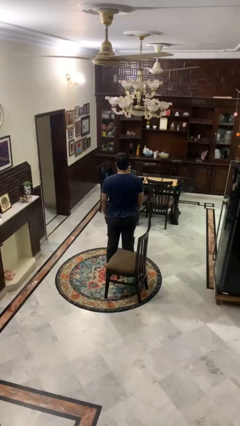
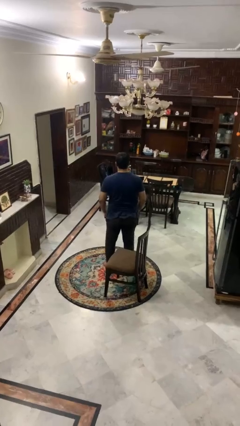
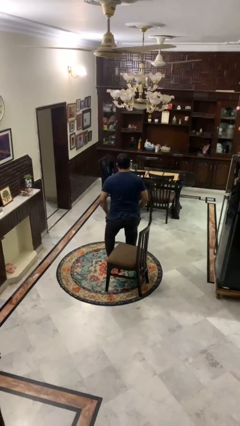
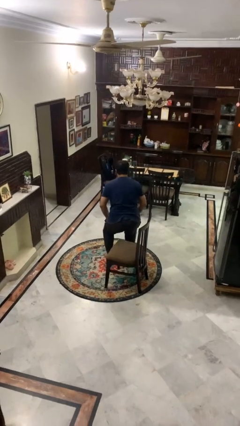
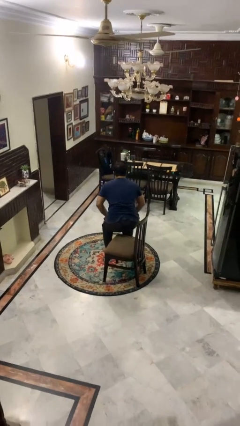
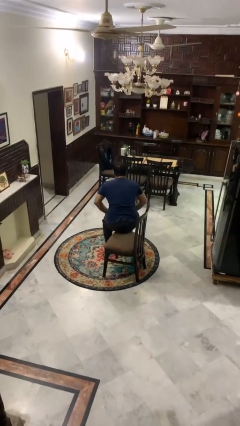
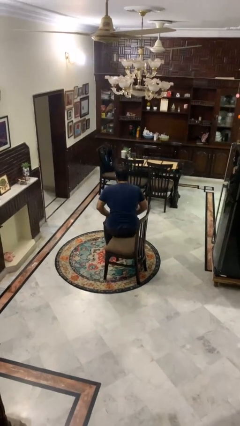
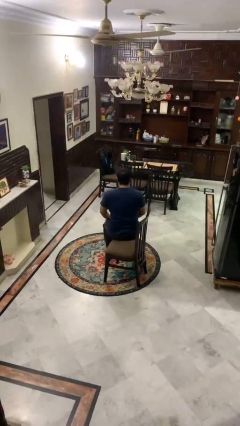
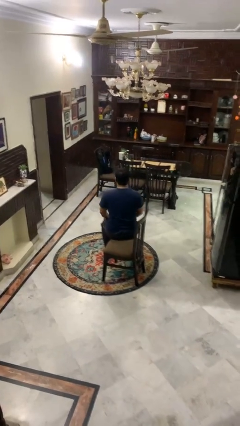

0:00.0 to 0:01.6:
person sits down

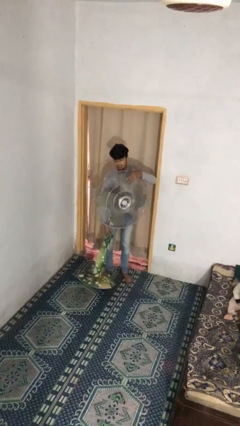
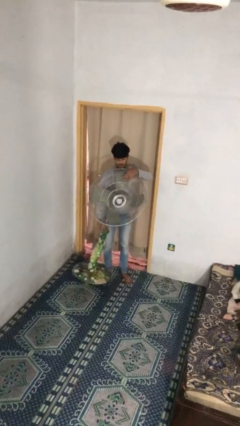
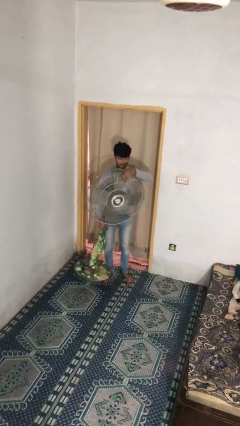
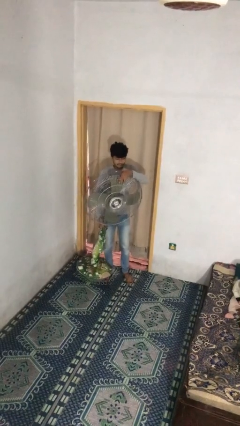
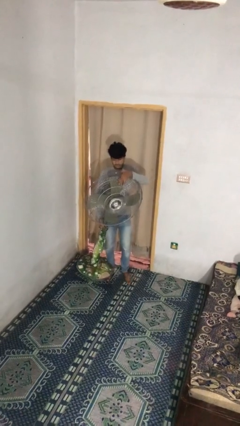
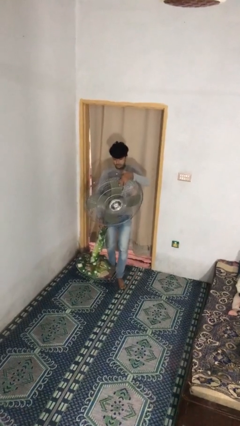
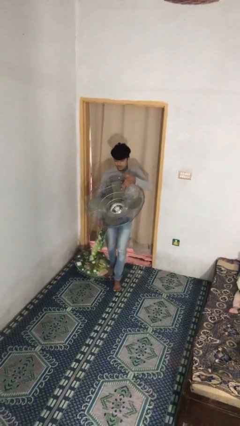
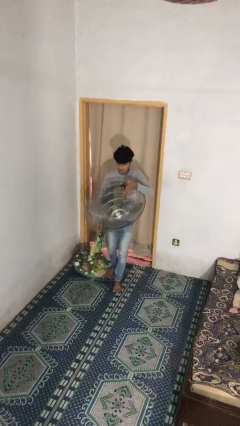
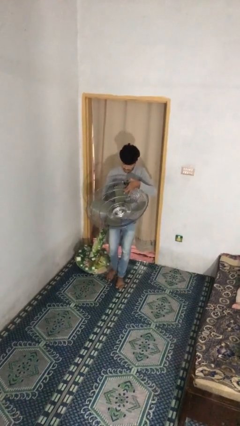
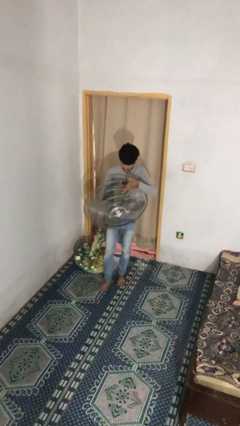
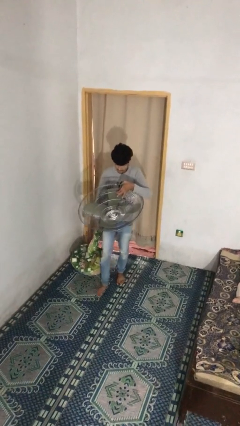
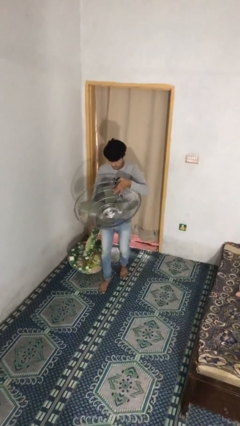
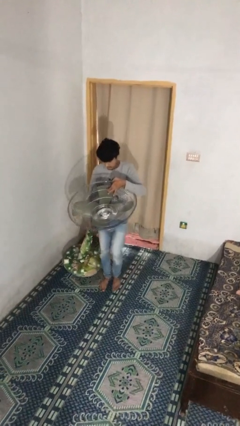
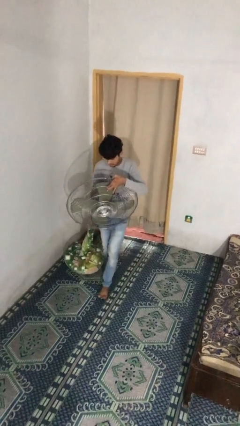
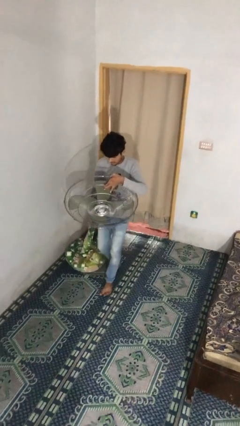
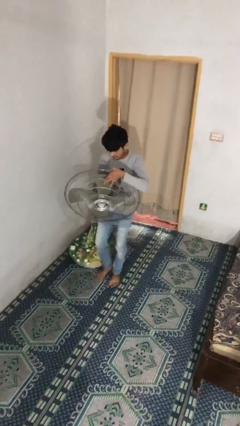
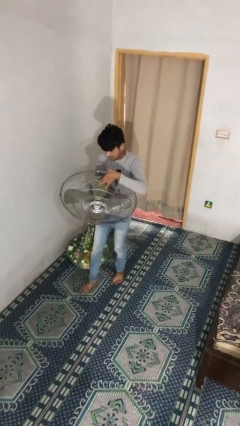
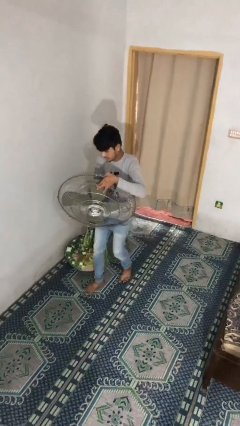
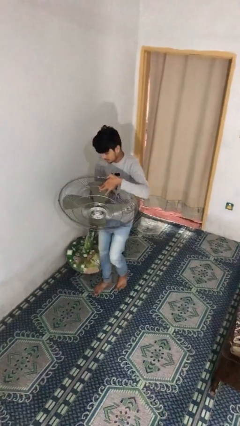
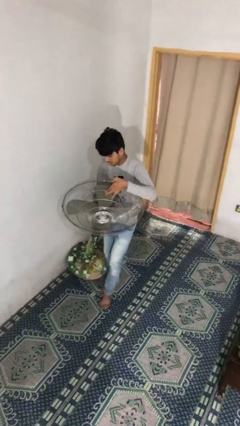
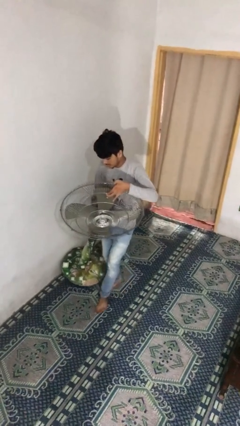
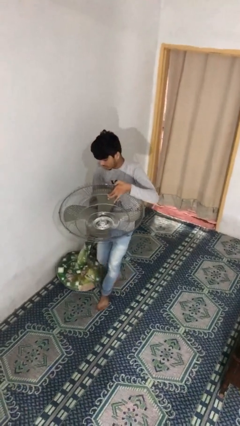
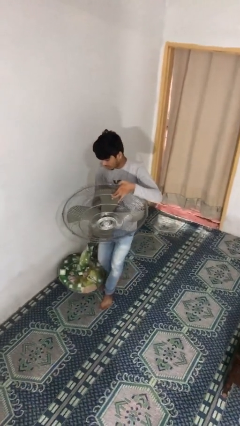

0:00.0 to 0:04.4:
person carries heavy object

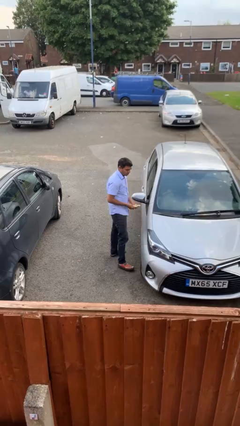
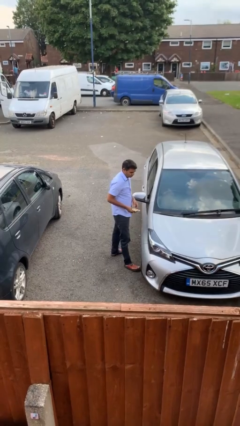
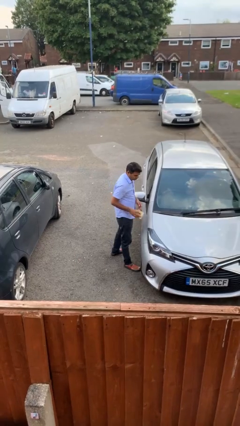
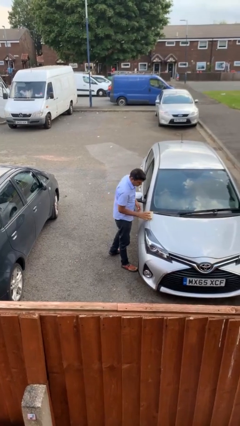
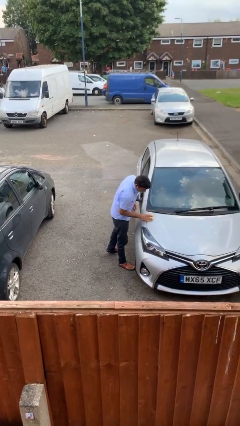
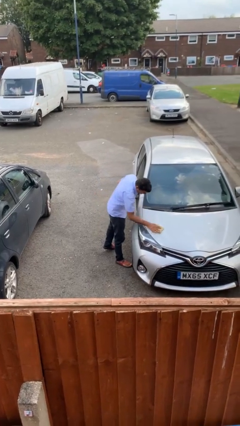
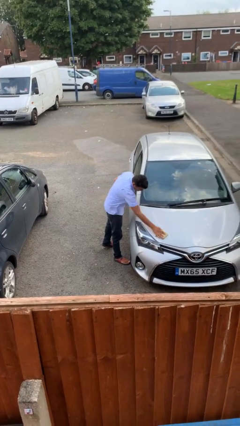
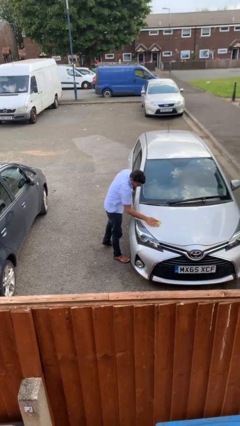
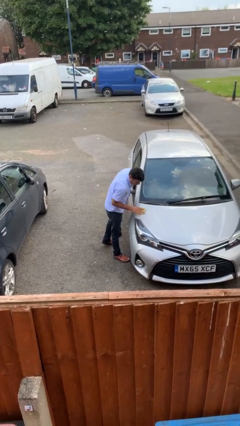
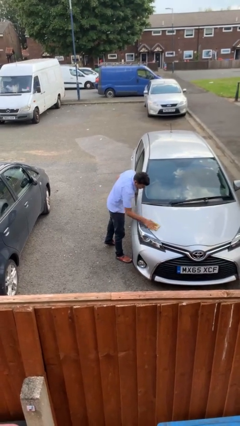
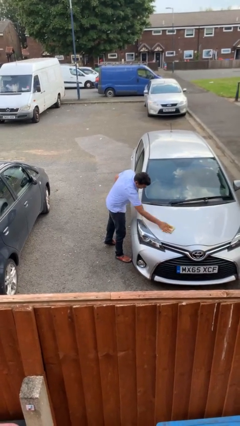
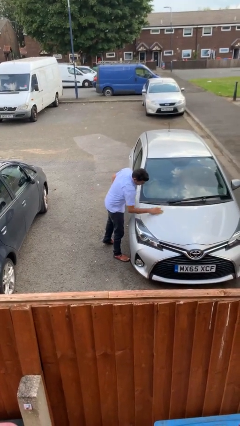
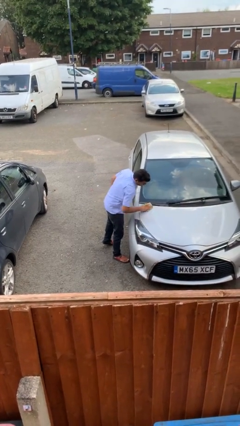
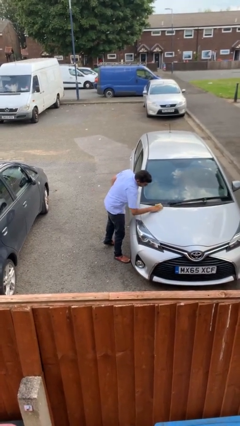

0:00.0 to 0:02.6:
person polishes car with rag

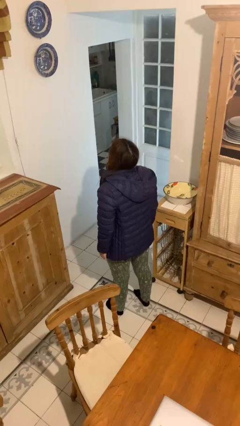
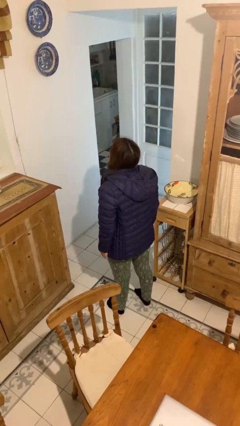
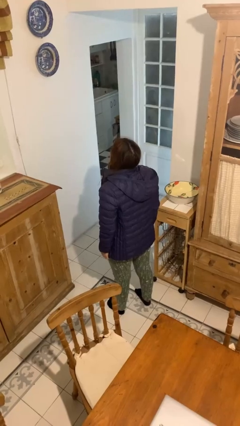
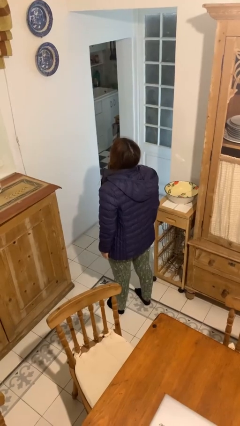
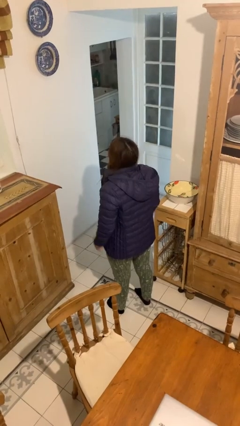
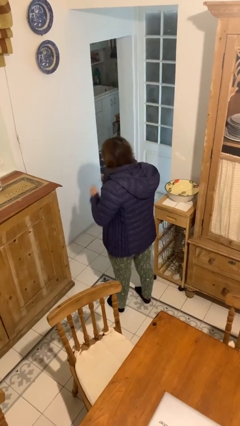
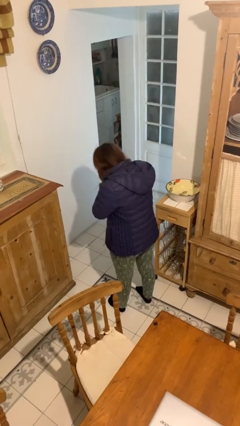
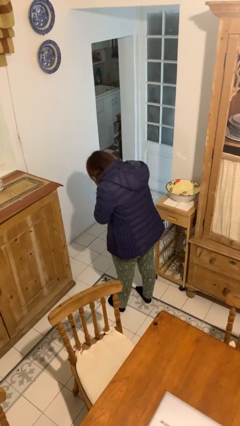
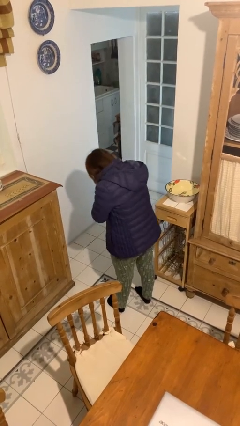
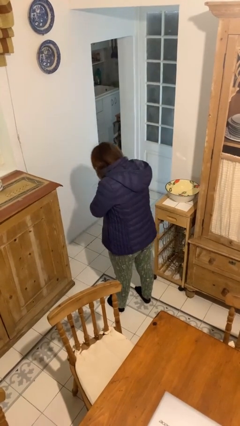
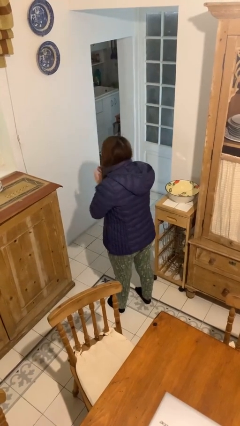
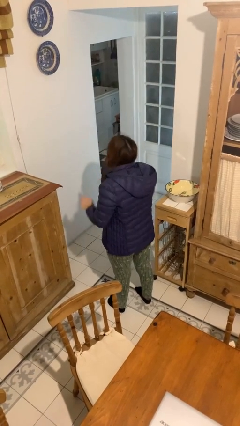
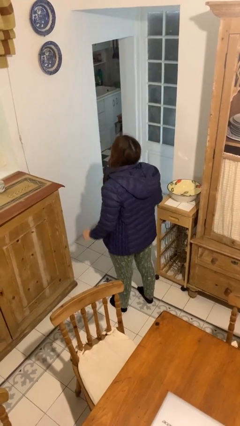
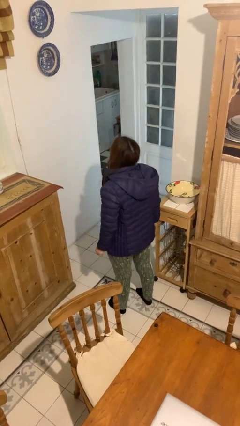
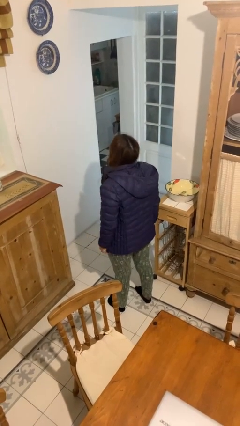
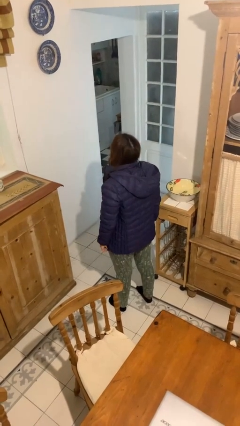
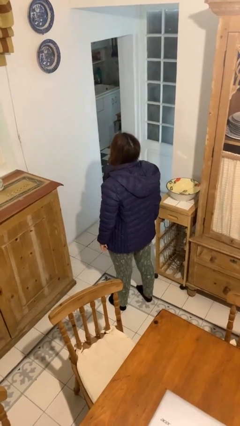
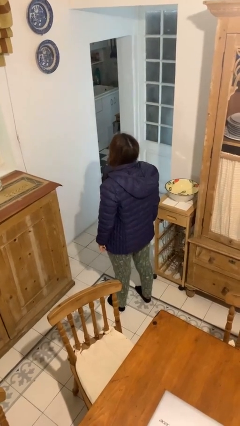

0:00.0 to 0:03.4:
person sneezes into hand

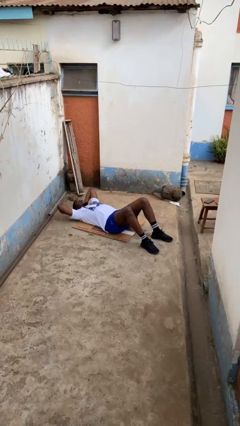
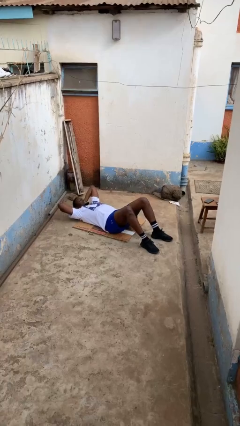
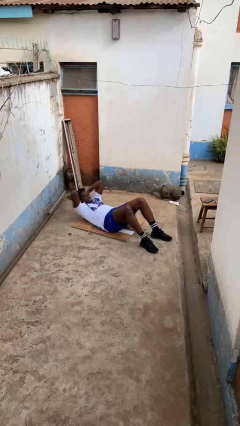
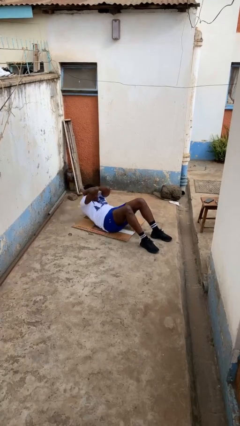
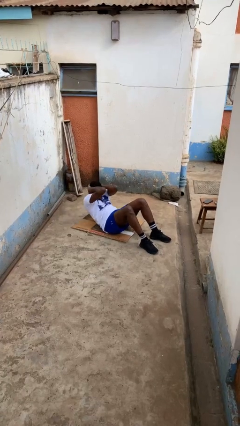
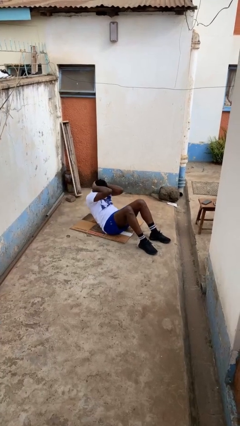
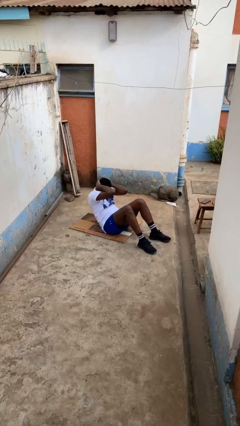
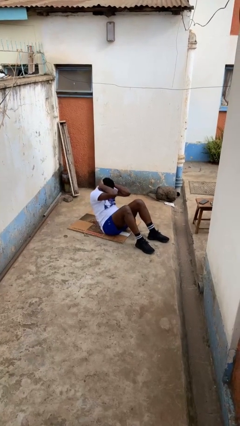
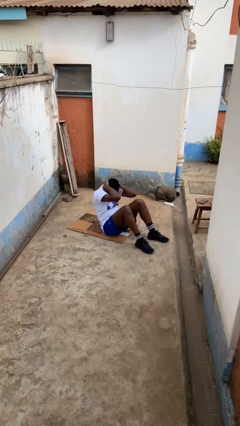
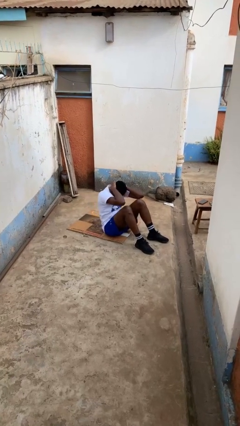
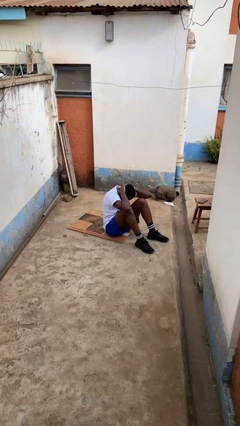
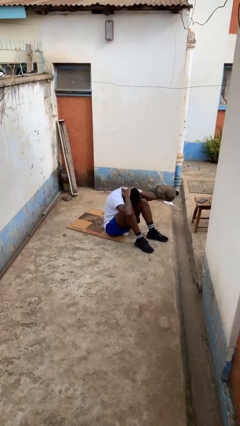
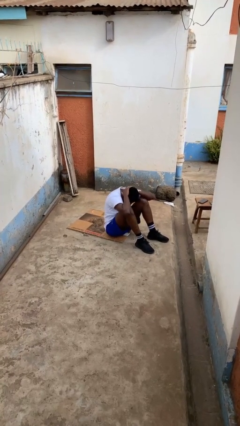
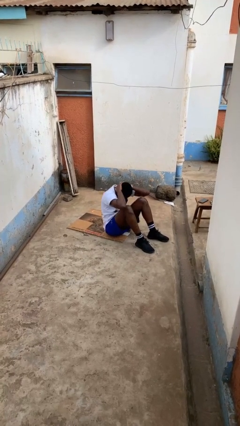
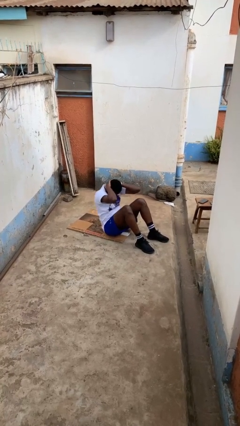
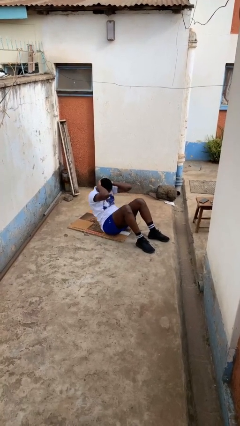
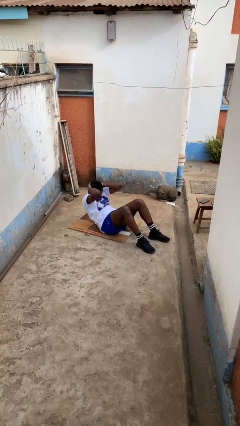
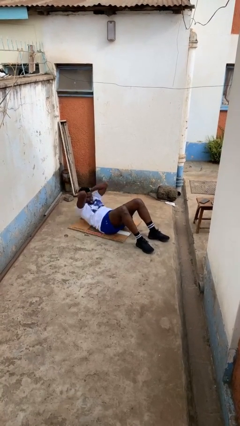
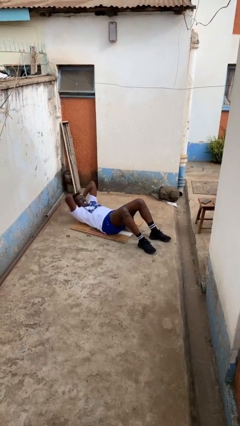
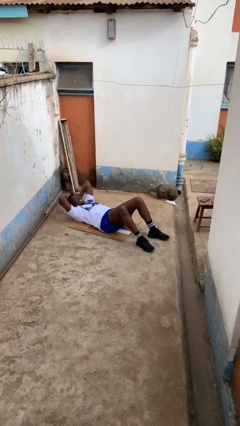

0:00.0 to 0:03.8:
person exercises with situp

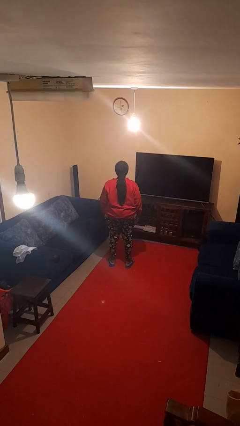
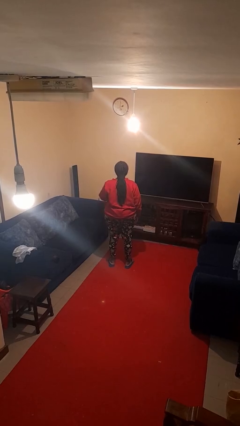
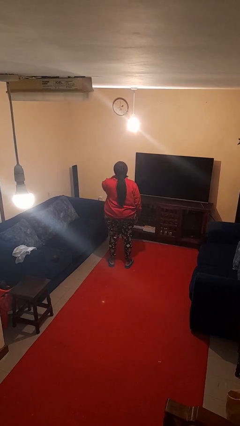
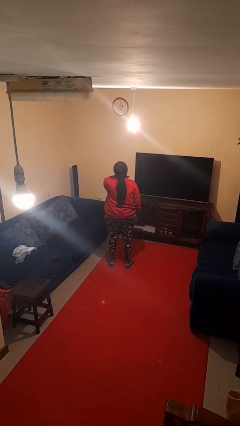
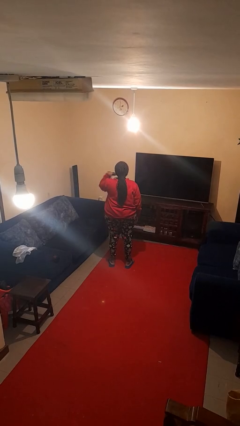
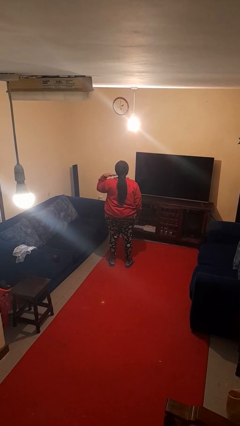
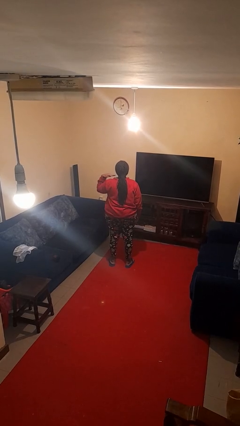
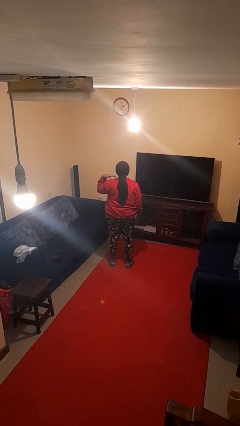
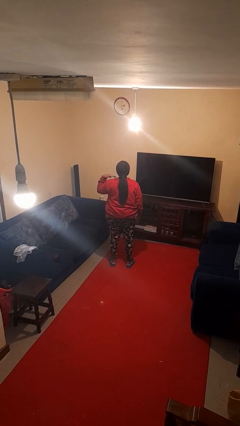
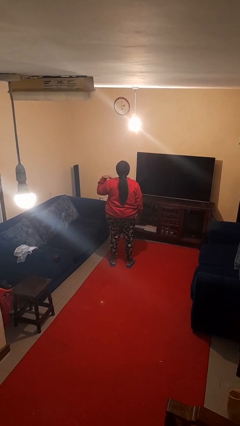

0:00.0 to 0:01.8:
person gestures cut
